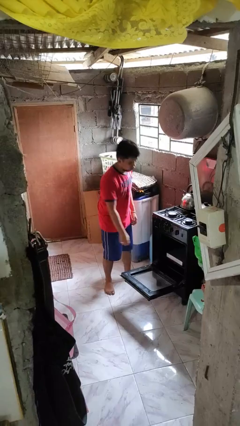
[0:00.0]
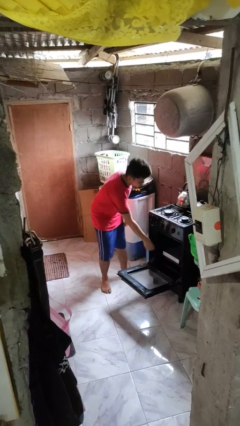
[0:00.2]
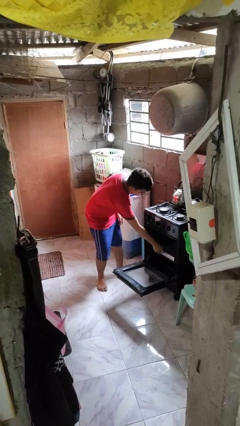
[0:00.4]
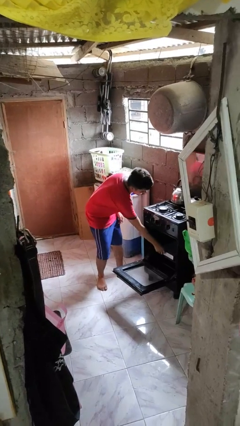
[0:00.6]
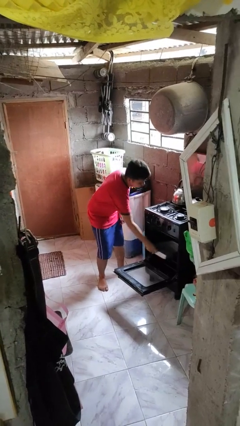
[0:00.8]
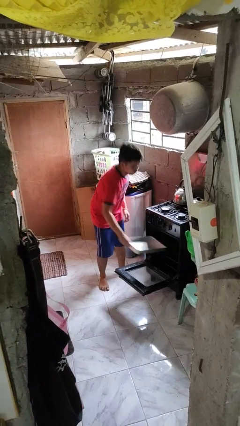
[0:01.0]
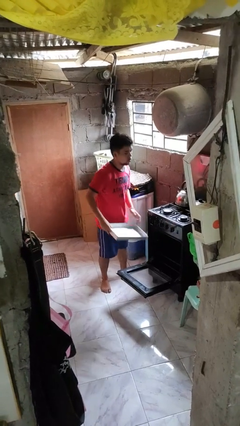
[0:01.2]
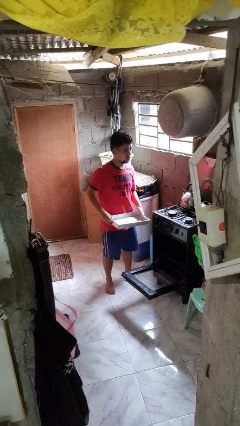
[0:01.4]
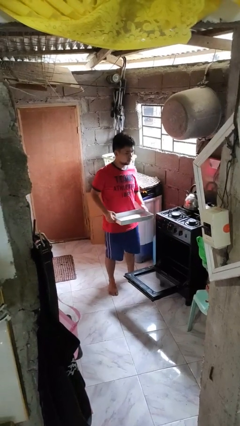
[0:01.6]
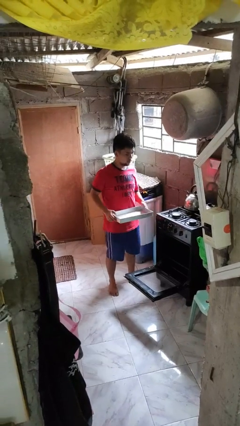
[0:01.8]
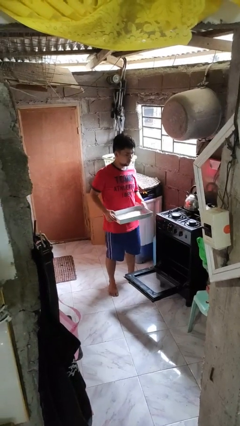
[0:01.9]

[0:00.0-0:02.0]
person takes object from oven

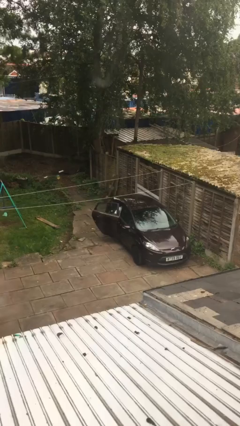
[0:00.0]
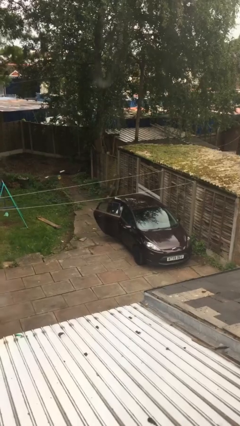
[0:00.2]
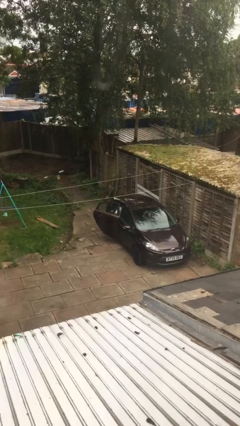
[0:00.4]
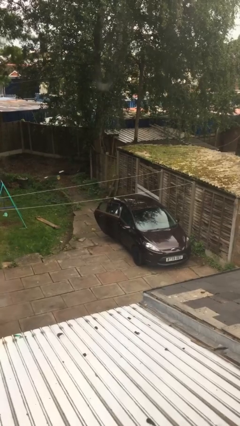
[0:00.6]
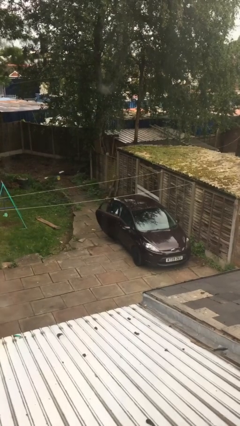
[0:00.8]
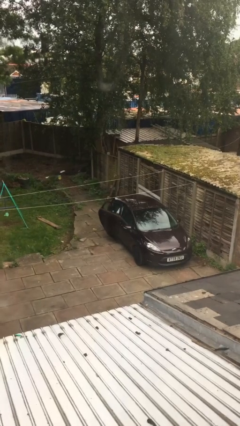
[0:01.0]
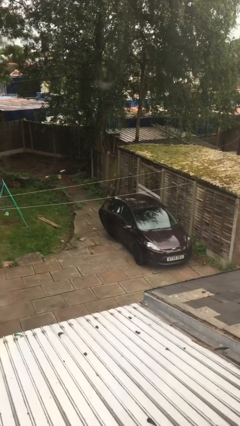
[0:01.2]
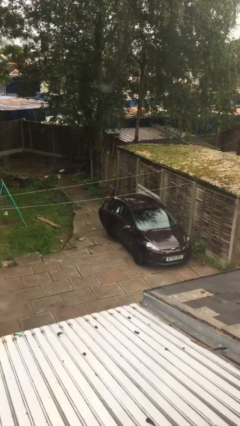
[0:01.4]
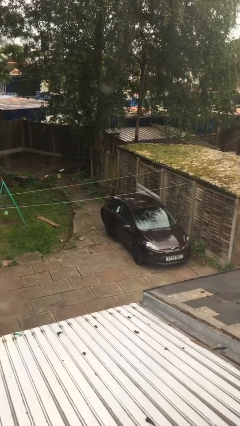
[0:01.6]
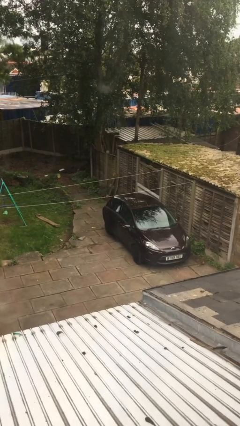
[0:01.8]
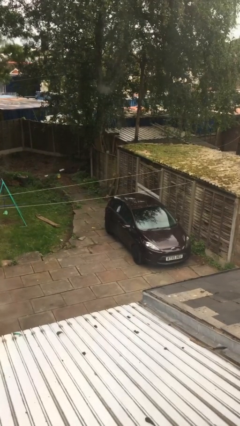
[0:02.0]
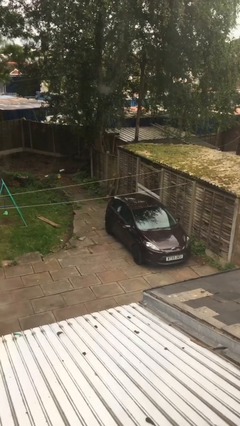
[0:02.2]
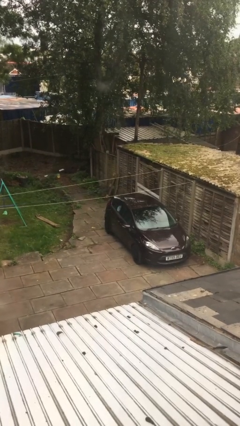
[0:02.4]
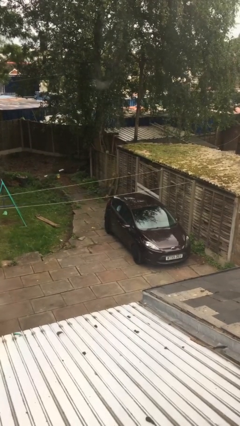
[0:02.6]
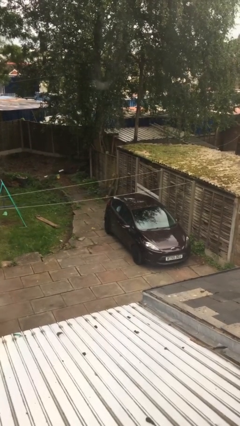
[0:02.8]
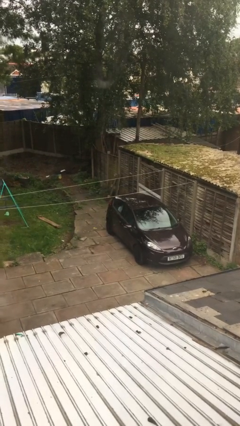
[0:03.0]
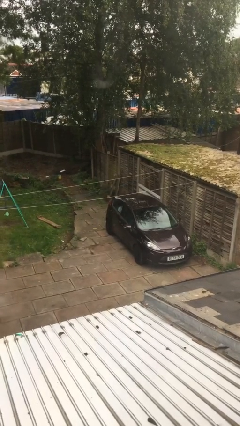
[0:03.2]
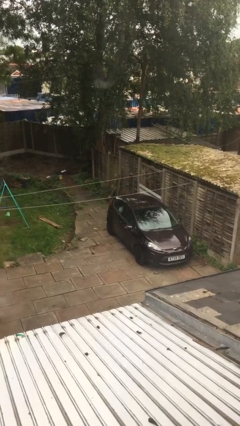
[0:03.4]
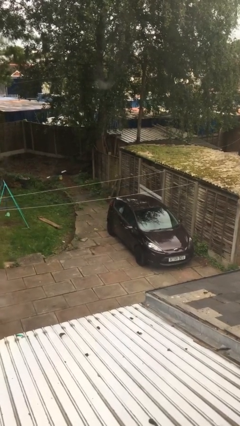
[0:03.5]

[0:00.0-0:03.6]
person closes car door

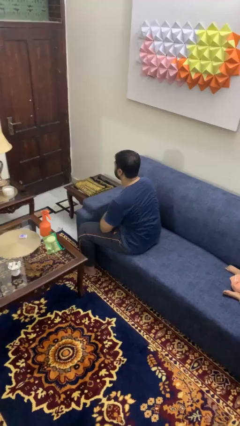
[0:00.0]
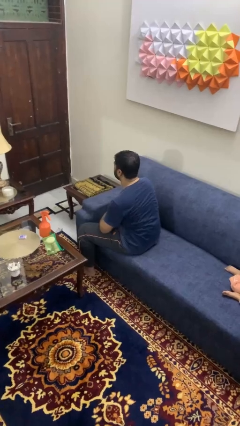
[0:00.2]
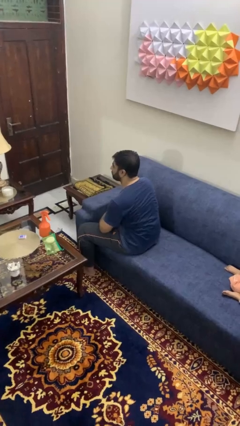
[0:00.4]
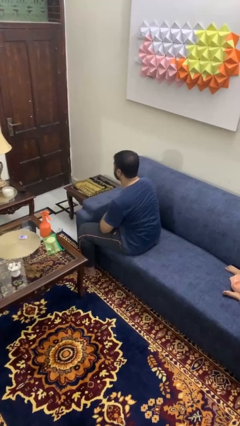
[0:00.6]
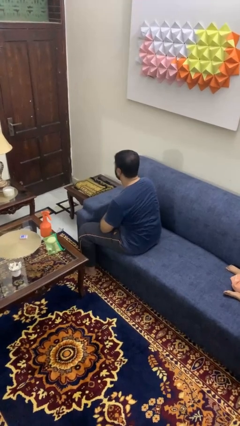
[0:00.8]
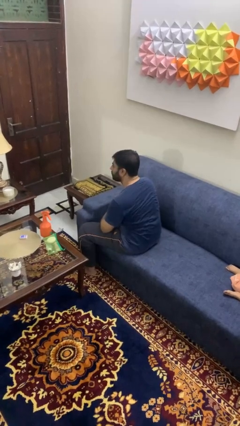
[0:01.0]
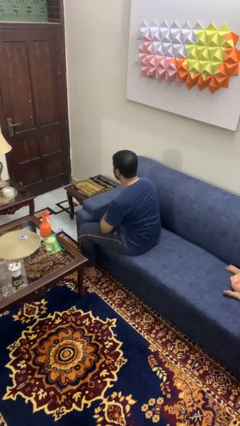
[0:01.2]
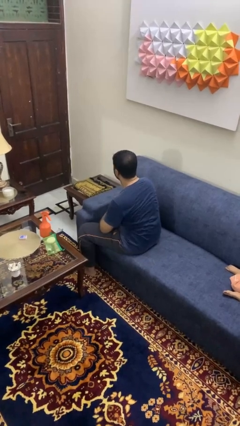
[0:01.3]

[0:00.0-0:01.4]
person shakes head

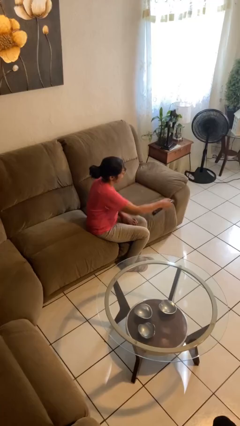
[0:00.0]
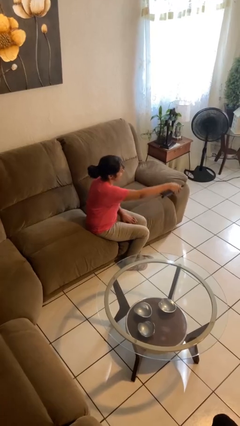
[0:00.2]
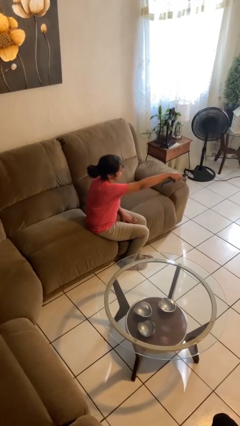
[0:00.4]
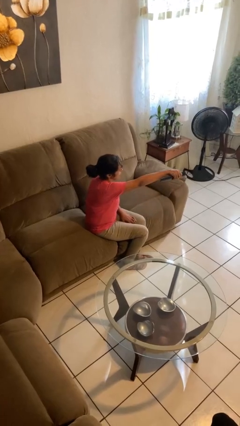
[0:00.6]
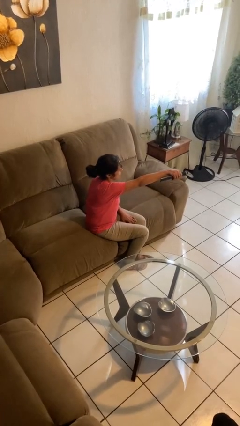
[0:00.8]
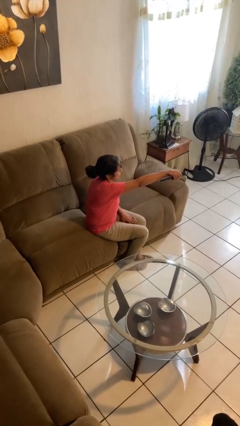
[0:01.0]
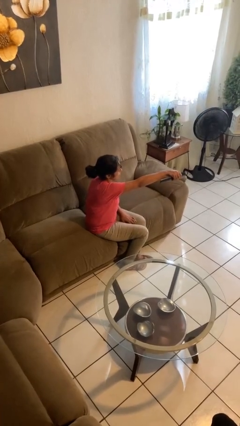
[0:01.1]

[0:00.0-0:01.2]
person uses television remote

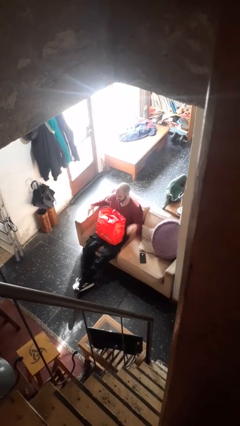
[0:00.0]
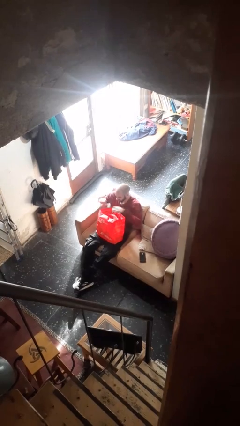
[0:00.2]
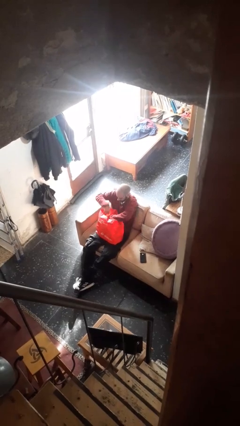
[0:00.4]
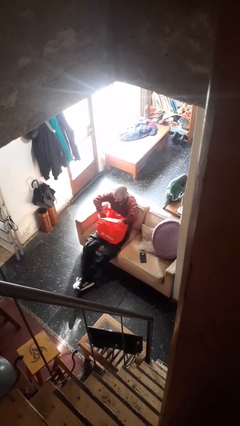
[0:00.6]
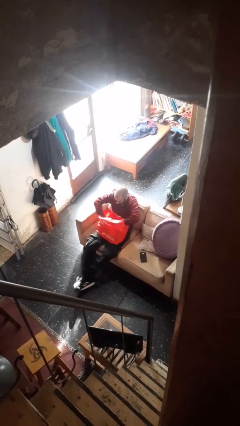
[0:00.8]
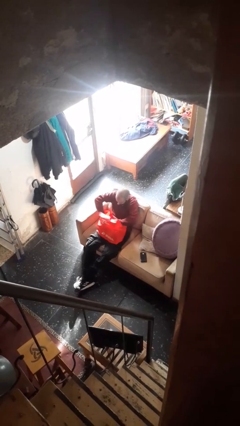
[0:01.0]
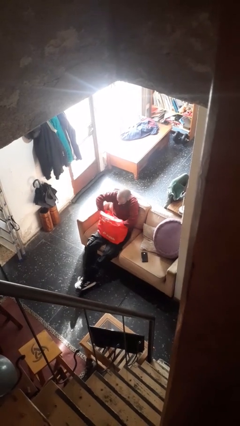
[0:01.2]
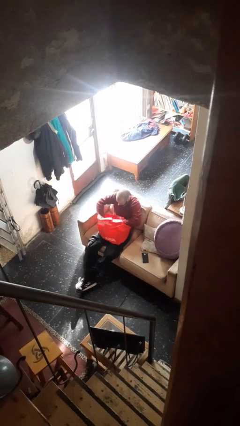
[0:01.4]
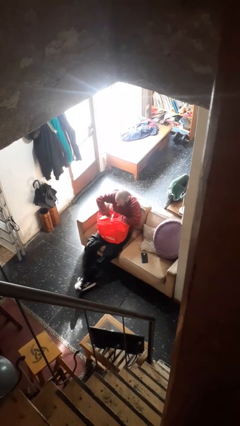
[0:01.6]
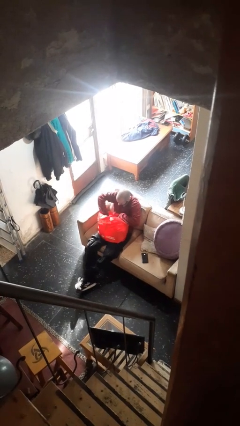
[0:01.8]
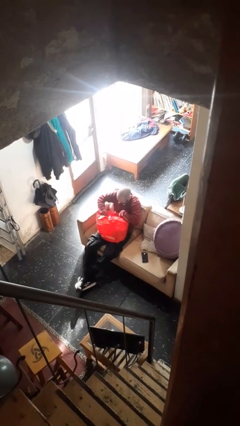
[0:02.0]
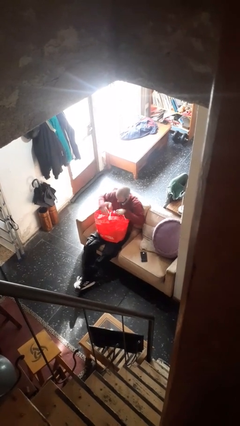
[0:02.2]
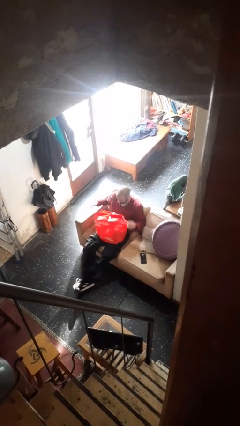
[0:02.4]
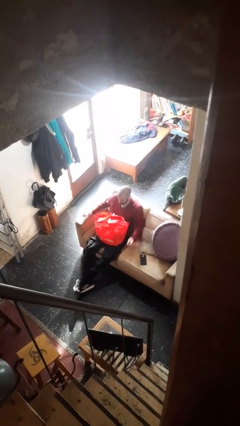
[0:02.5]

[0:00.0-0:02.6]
person searches in bag

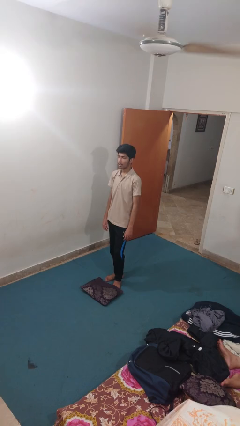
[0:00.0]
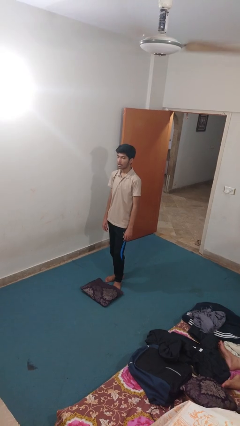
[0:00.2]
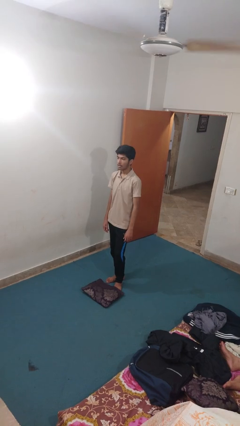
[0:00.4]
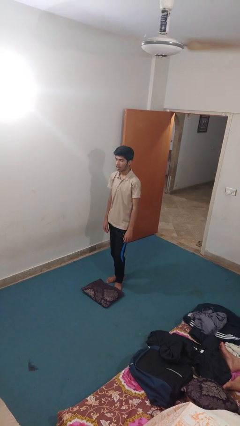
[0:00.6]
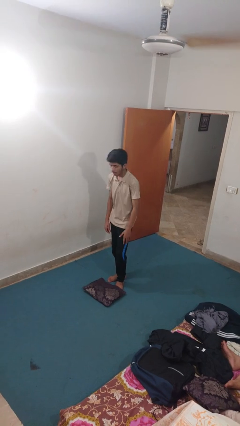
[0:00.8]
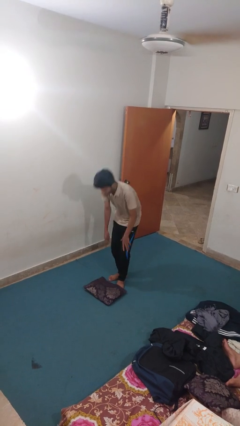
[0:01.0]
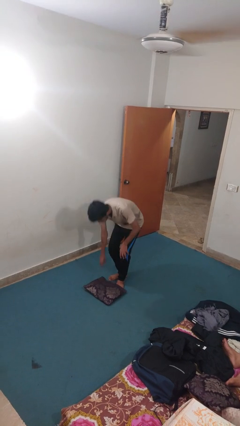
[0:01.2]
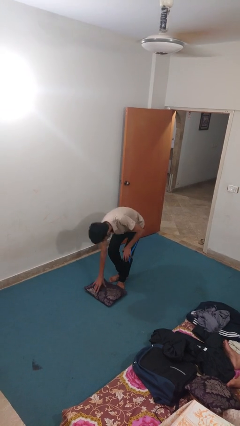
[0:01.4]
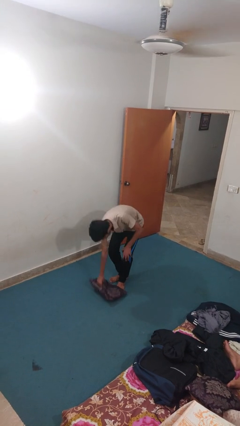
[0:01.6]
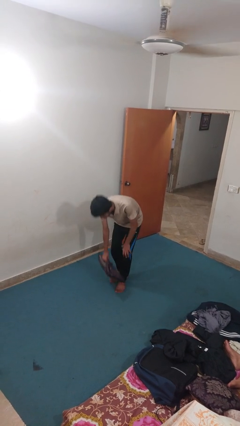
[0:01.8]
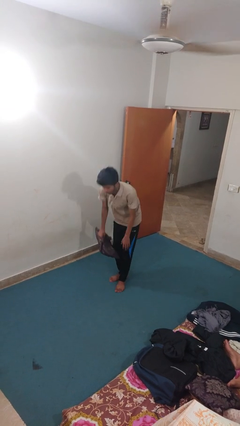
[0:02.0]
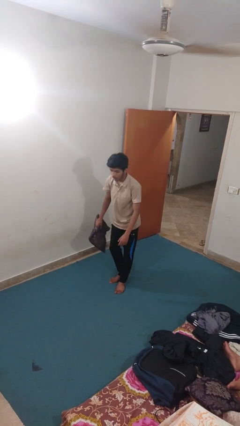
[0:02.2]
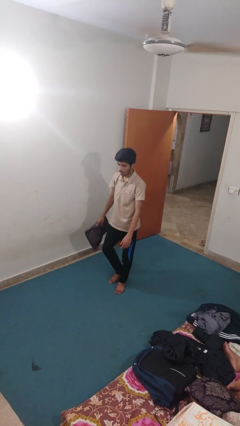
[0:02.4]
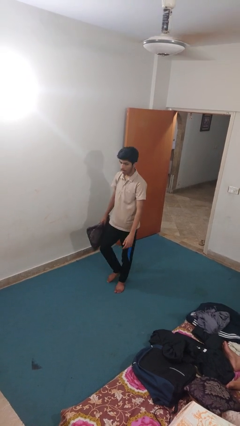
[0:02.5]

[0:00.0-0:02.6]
person picks up object from floor

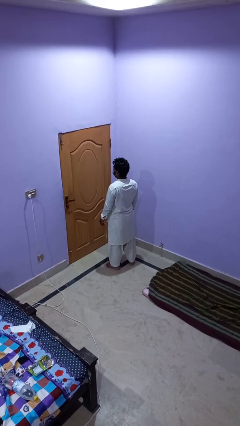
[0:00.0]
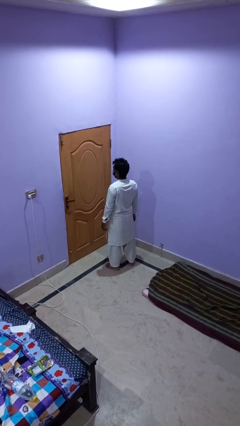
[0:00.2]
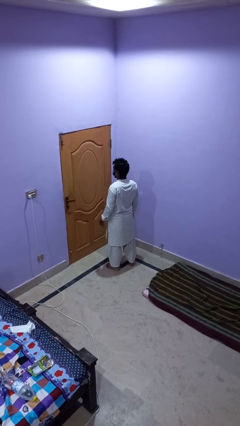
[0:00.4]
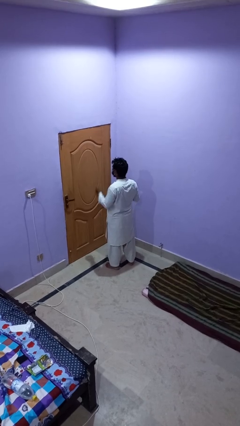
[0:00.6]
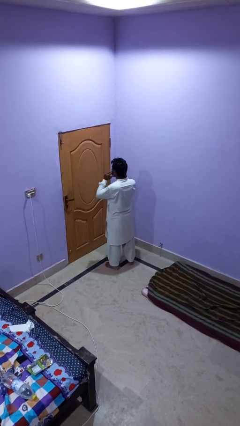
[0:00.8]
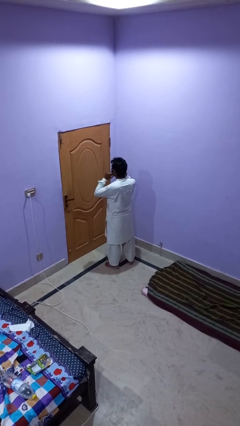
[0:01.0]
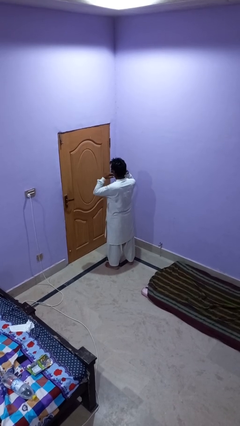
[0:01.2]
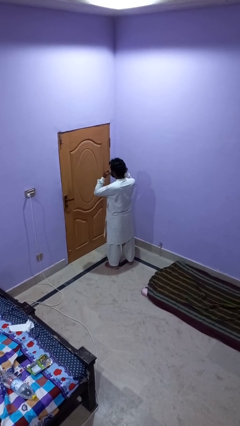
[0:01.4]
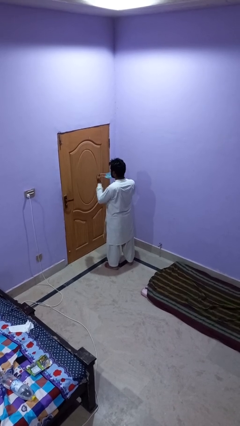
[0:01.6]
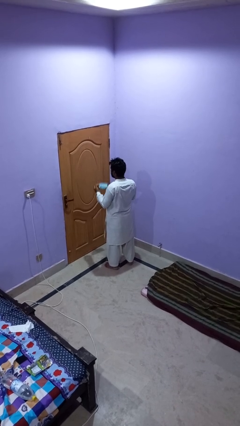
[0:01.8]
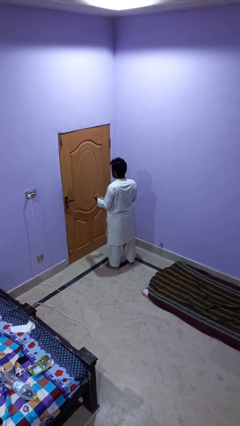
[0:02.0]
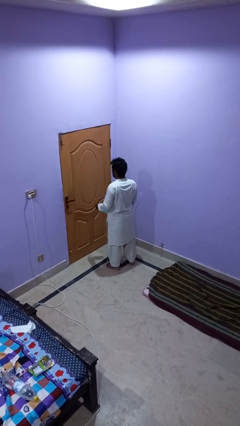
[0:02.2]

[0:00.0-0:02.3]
person takes off facemask

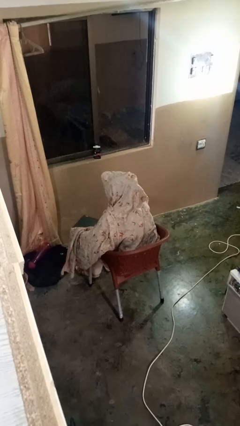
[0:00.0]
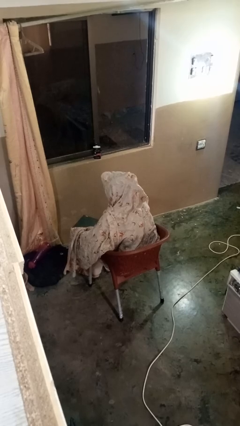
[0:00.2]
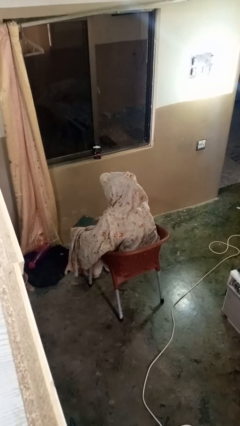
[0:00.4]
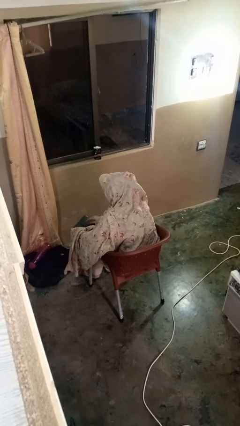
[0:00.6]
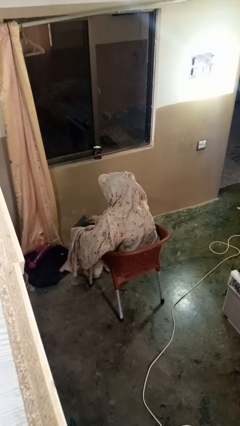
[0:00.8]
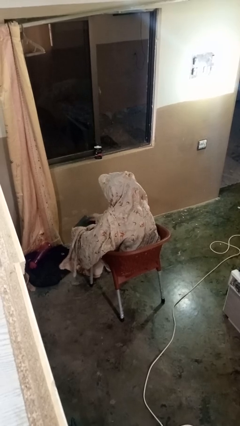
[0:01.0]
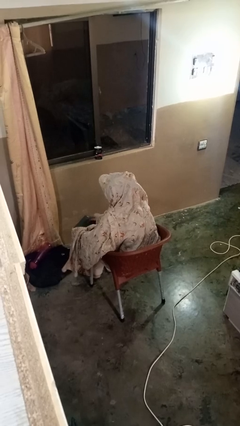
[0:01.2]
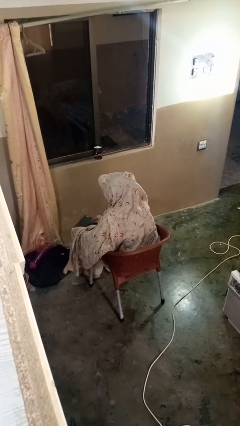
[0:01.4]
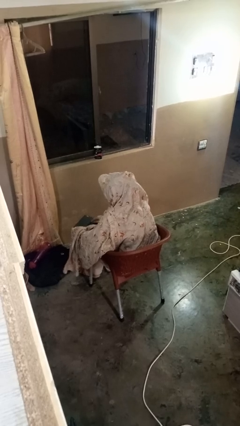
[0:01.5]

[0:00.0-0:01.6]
person interacts with tablet
